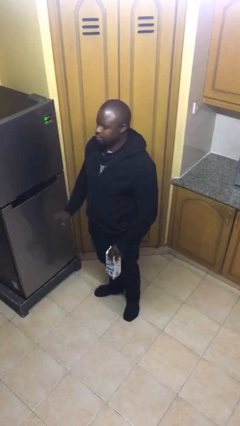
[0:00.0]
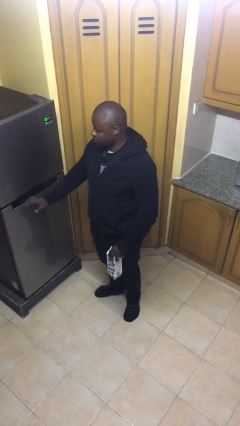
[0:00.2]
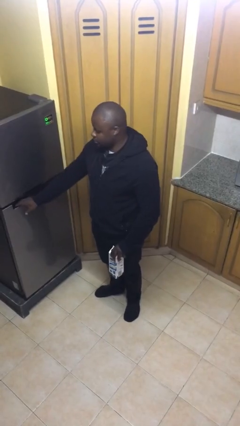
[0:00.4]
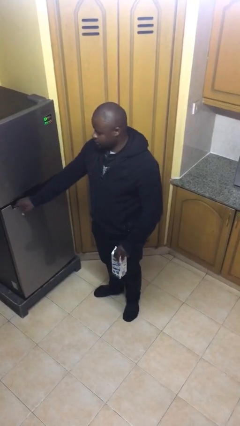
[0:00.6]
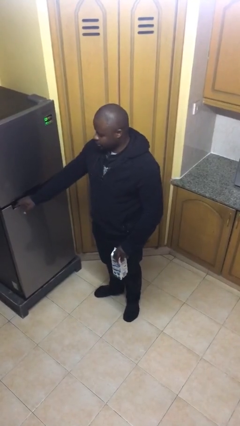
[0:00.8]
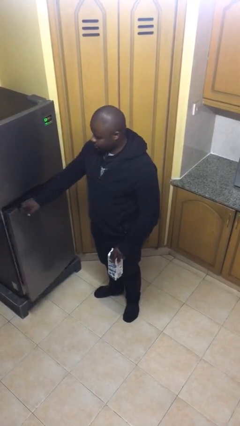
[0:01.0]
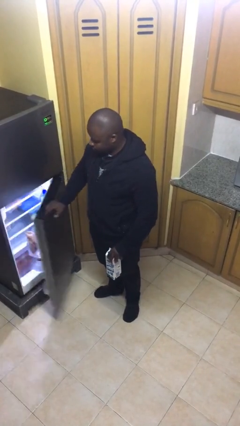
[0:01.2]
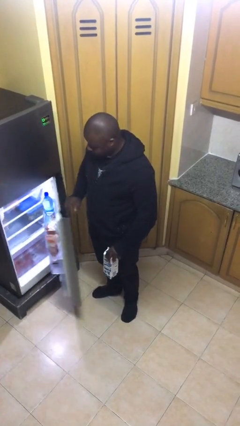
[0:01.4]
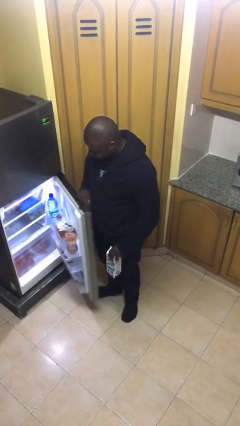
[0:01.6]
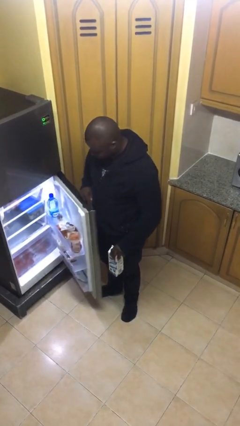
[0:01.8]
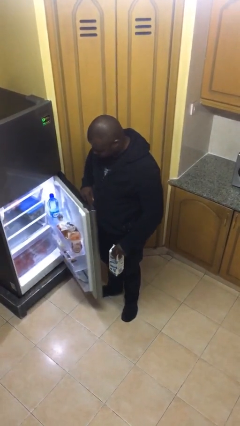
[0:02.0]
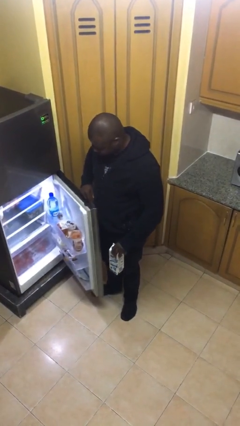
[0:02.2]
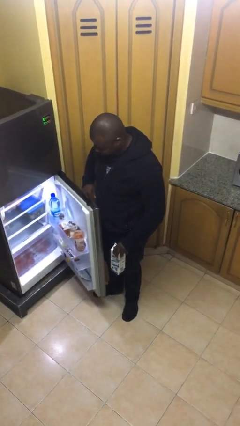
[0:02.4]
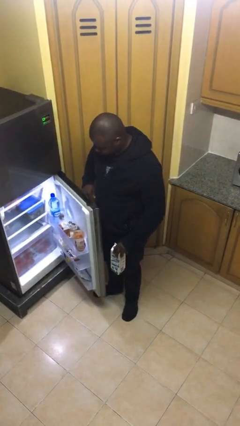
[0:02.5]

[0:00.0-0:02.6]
person opens refrigerator

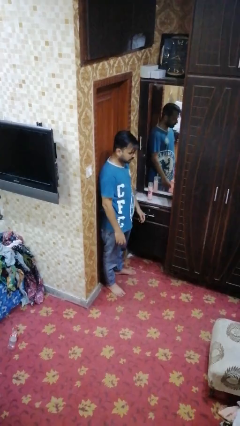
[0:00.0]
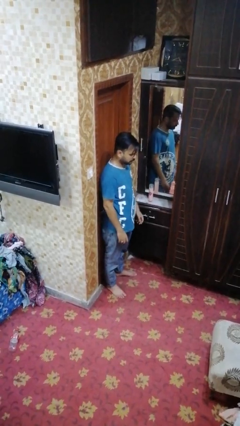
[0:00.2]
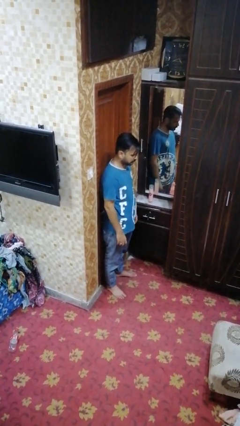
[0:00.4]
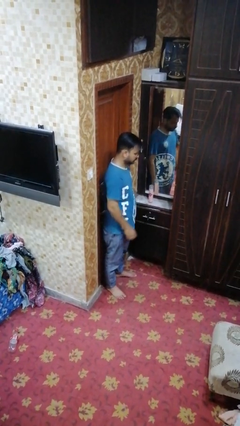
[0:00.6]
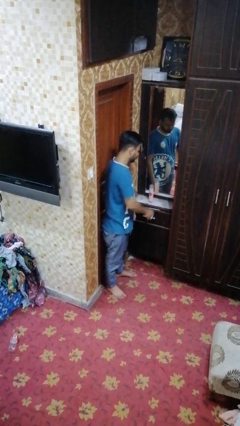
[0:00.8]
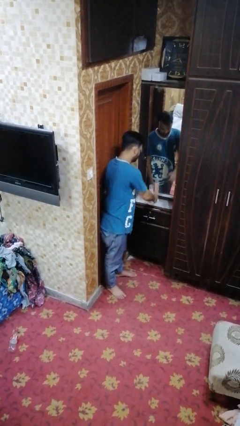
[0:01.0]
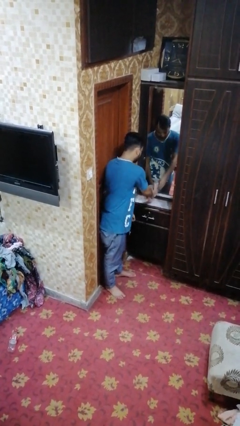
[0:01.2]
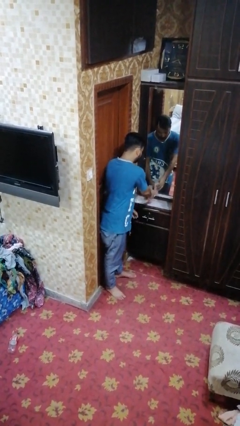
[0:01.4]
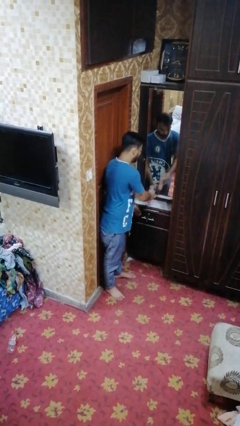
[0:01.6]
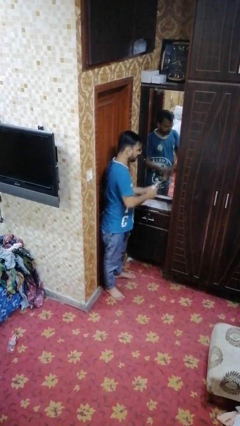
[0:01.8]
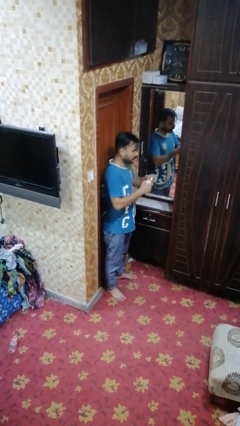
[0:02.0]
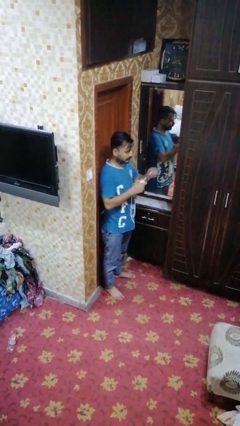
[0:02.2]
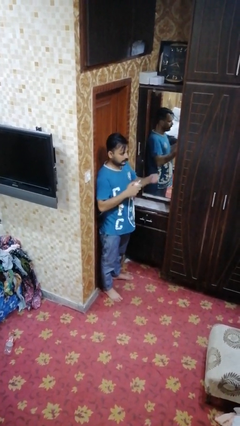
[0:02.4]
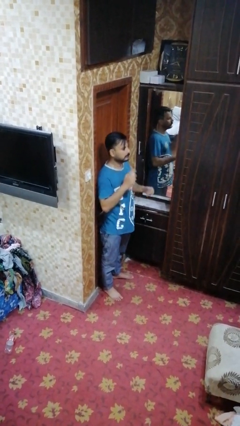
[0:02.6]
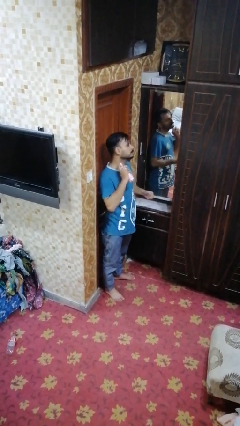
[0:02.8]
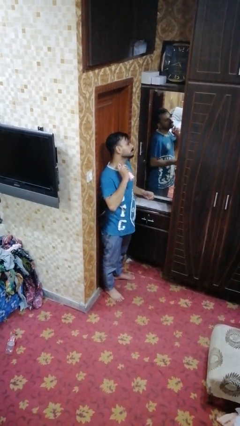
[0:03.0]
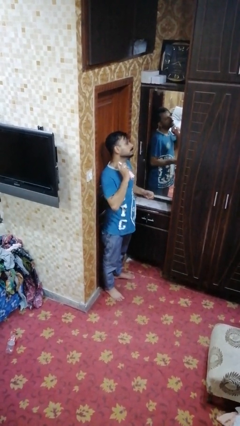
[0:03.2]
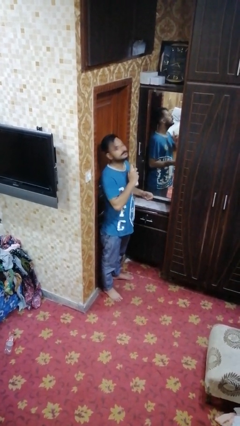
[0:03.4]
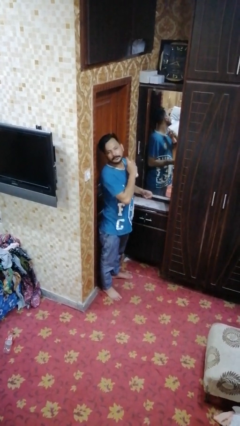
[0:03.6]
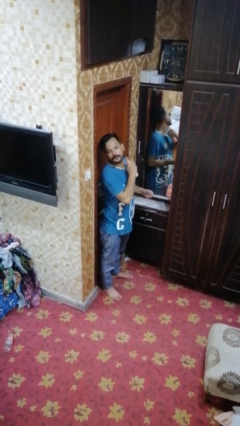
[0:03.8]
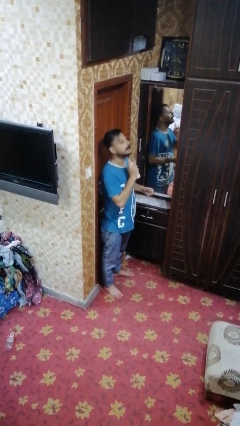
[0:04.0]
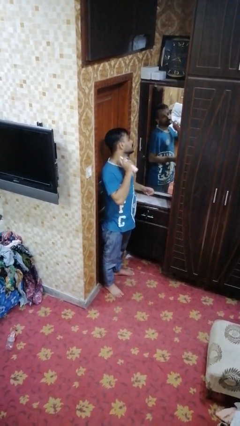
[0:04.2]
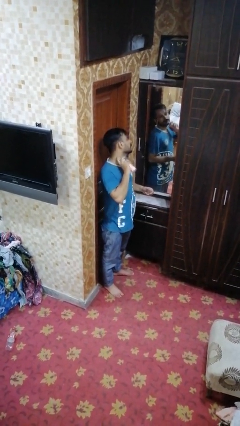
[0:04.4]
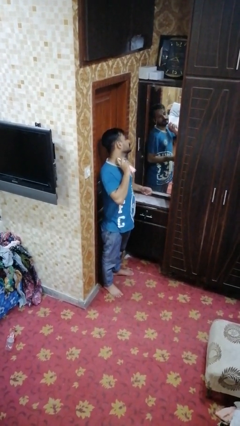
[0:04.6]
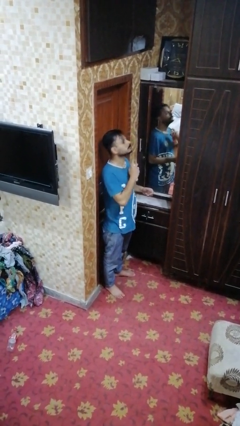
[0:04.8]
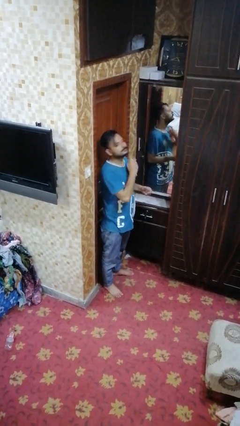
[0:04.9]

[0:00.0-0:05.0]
person sprays from bottle

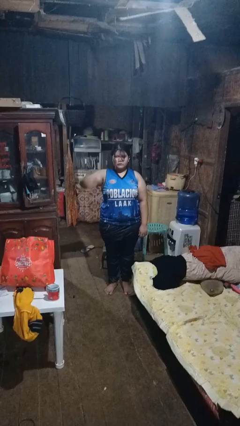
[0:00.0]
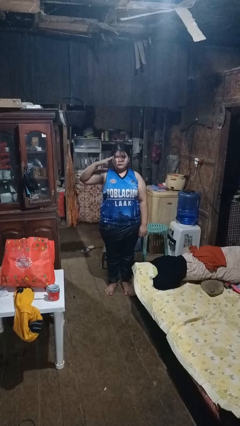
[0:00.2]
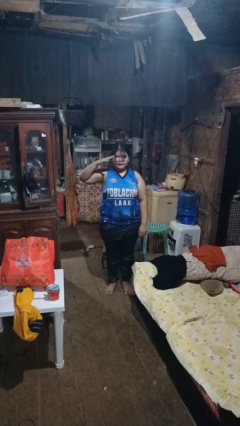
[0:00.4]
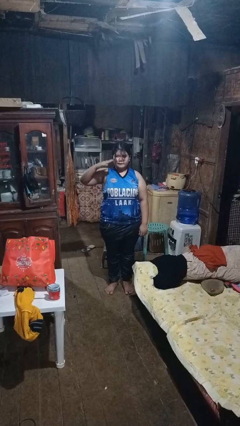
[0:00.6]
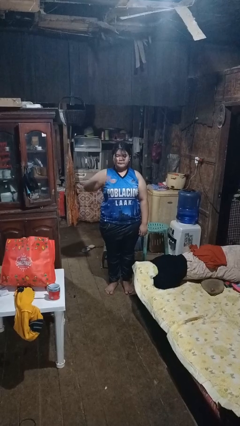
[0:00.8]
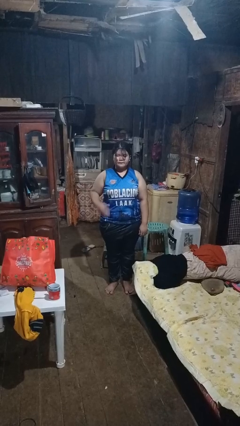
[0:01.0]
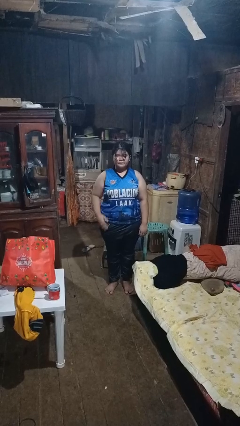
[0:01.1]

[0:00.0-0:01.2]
person salutes

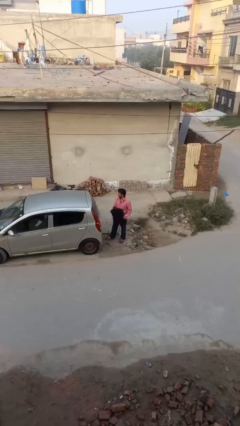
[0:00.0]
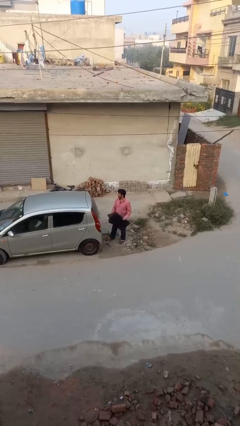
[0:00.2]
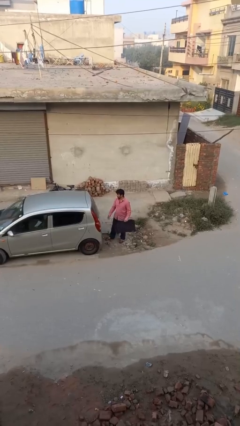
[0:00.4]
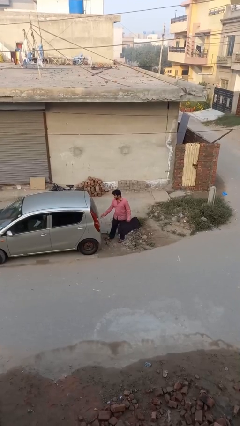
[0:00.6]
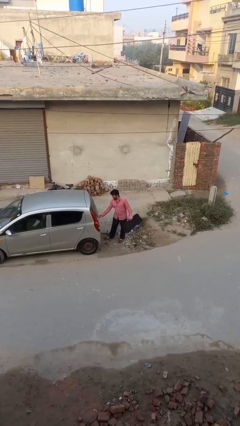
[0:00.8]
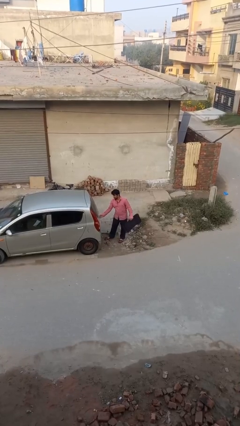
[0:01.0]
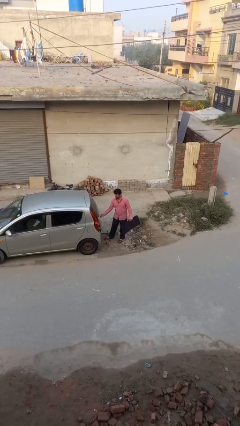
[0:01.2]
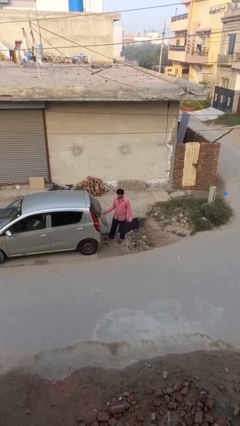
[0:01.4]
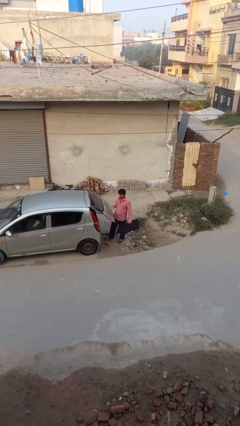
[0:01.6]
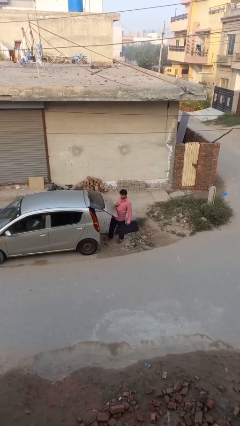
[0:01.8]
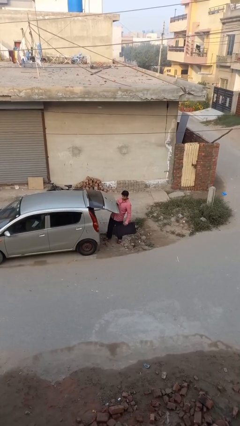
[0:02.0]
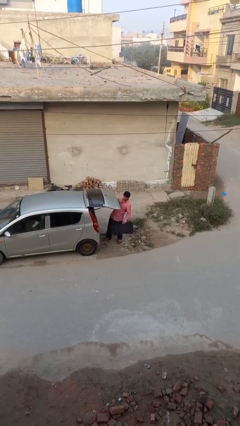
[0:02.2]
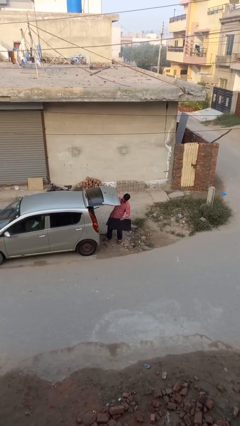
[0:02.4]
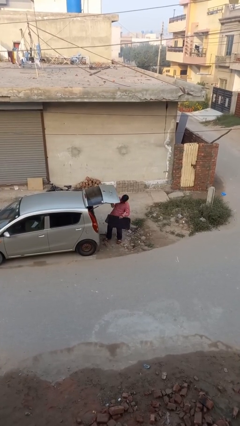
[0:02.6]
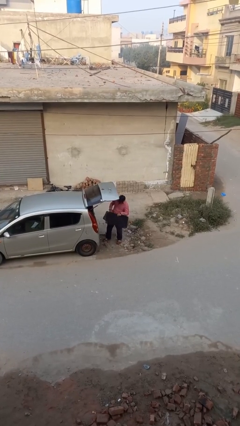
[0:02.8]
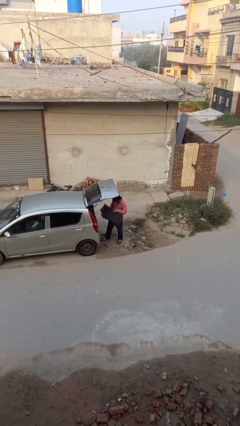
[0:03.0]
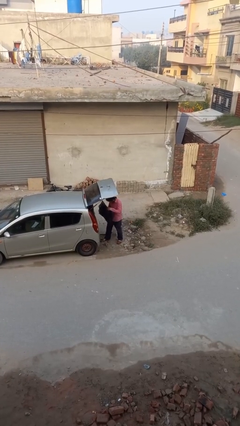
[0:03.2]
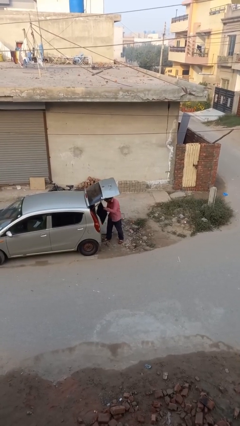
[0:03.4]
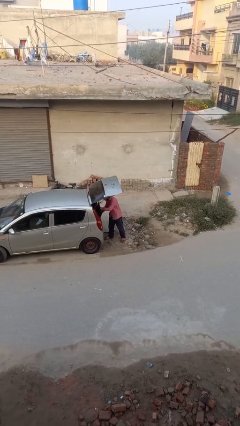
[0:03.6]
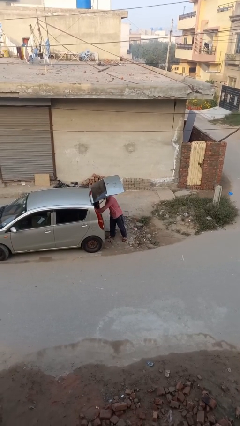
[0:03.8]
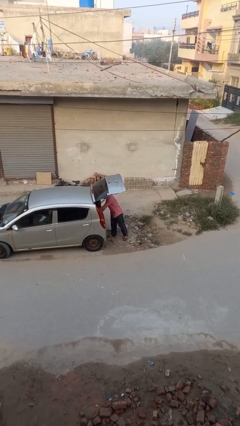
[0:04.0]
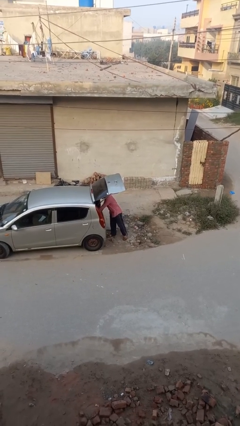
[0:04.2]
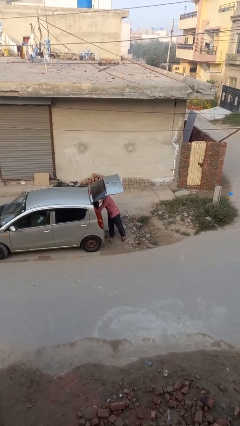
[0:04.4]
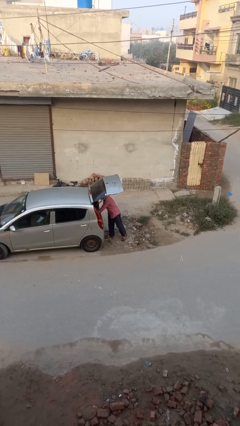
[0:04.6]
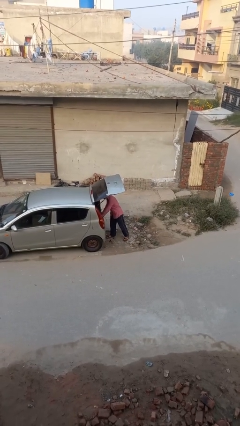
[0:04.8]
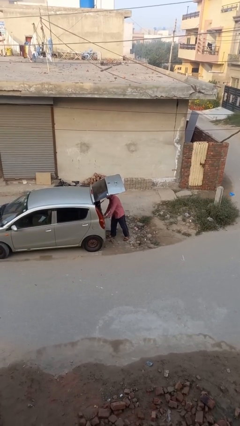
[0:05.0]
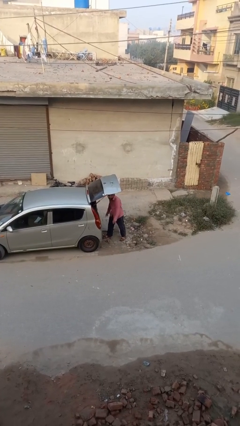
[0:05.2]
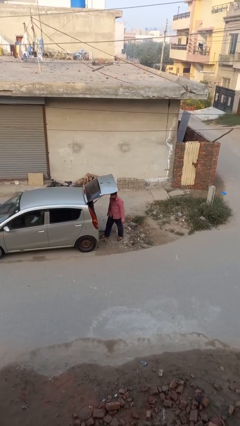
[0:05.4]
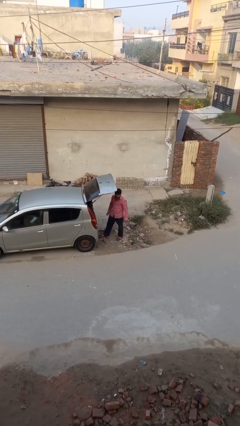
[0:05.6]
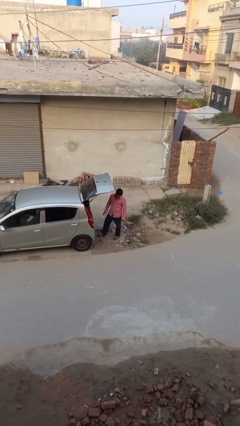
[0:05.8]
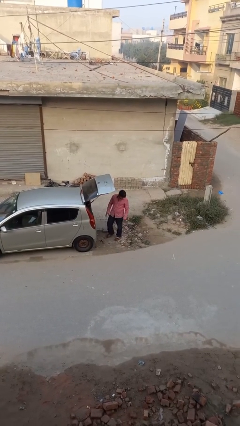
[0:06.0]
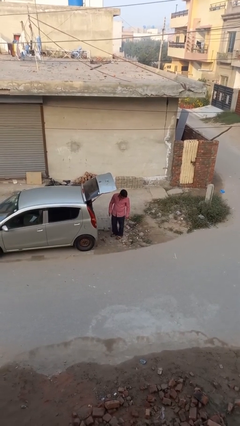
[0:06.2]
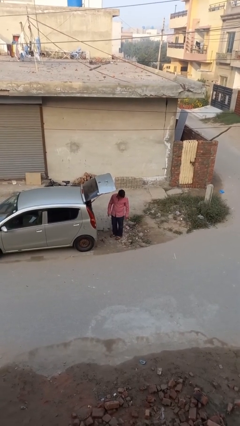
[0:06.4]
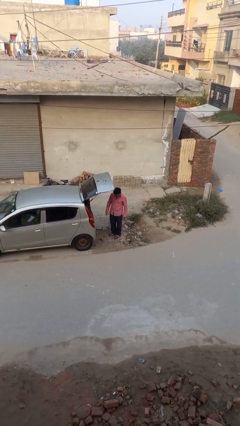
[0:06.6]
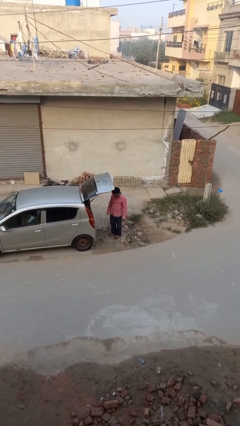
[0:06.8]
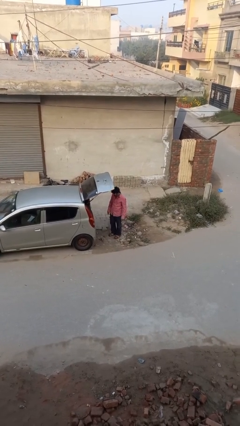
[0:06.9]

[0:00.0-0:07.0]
person loads car

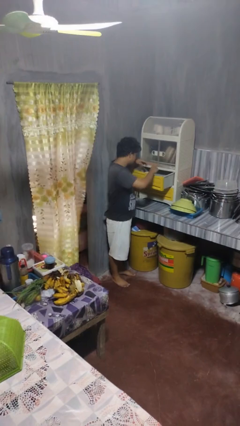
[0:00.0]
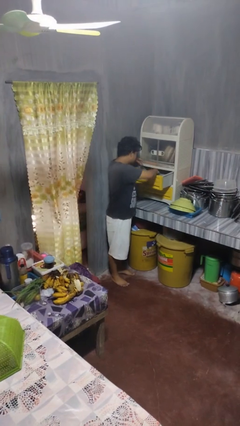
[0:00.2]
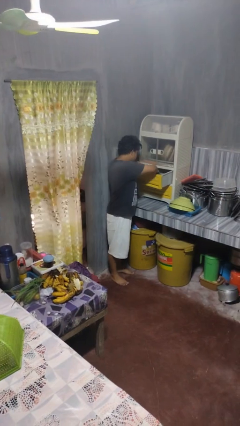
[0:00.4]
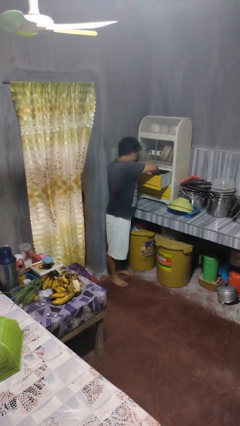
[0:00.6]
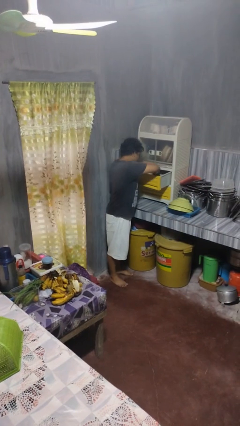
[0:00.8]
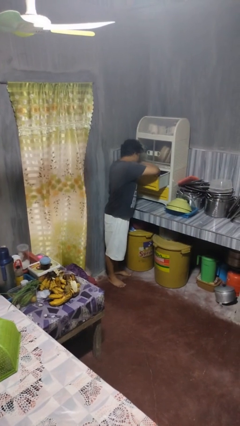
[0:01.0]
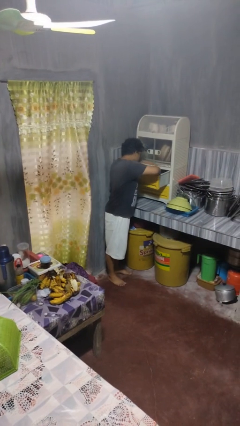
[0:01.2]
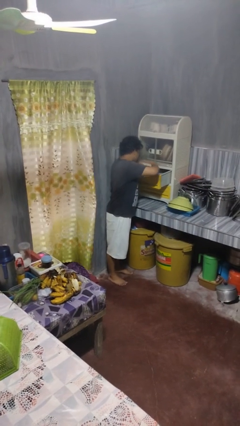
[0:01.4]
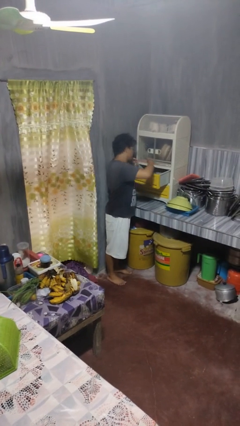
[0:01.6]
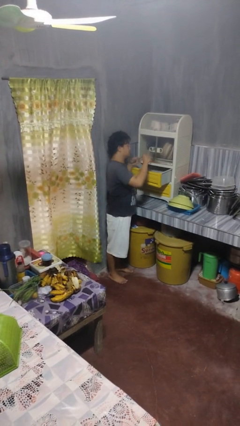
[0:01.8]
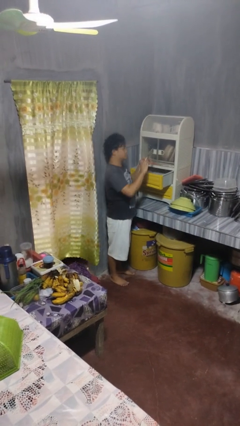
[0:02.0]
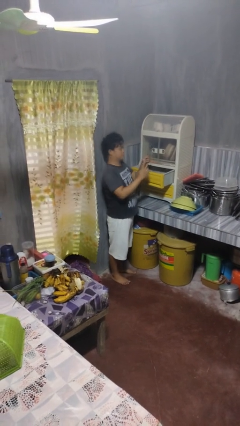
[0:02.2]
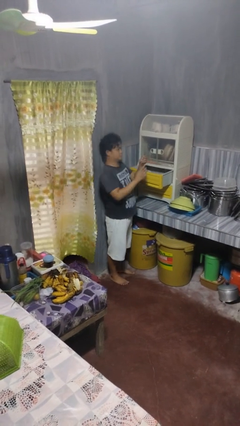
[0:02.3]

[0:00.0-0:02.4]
person takes object from kitchen drawer
